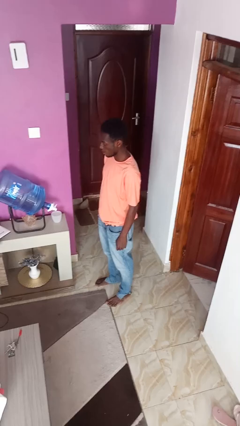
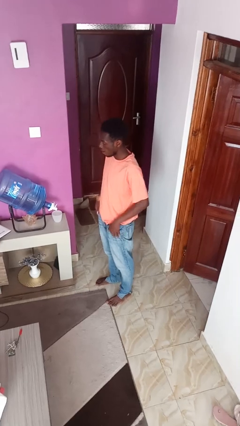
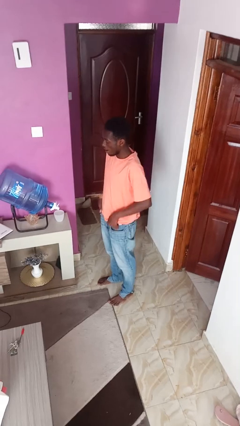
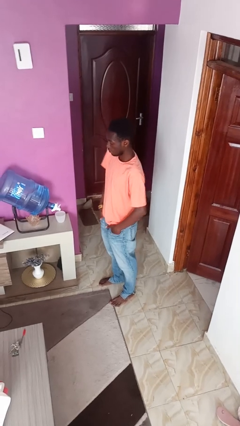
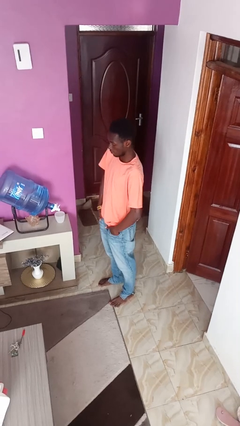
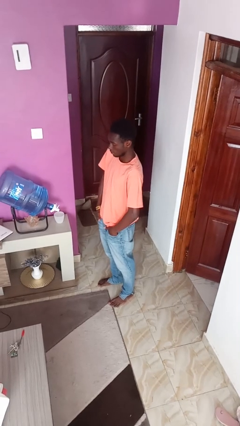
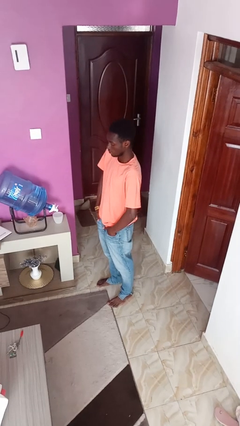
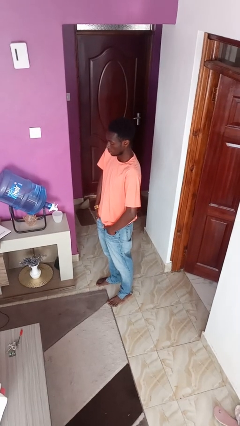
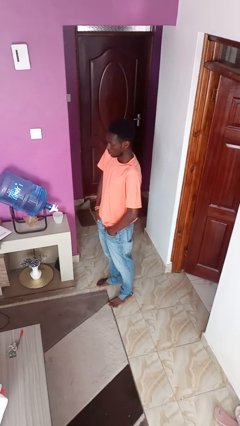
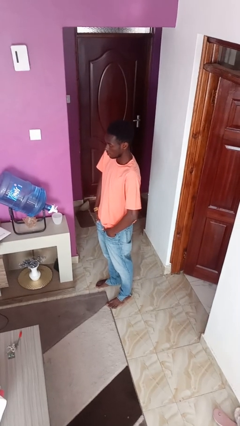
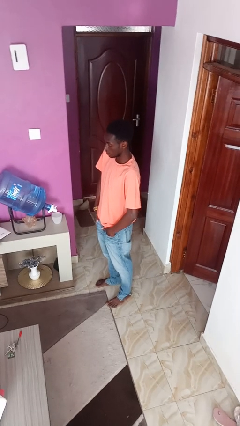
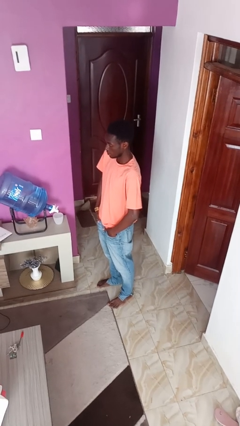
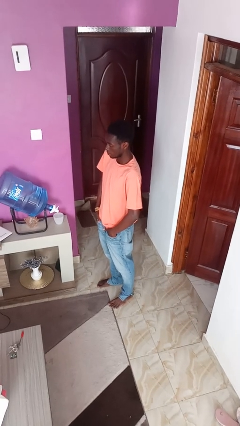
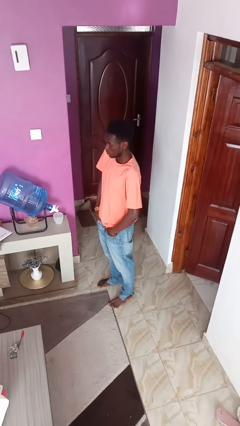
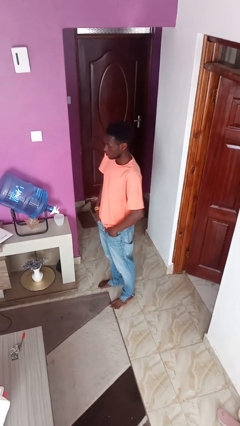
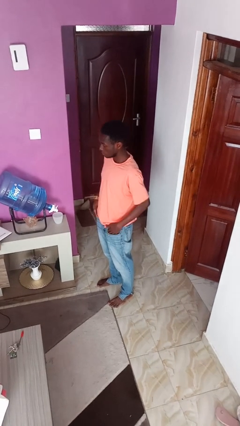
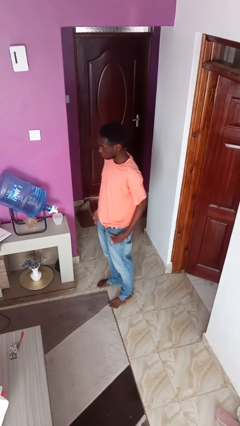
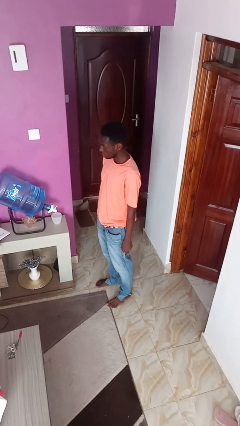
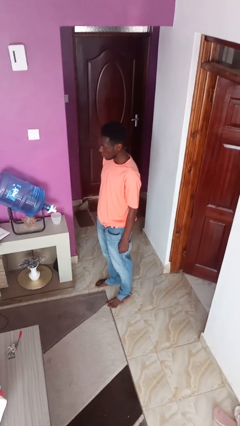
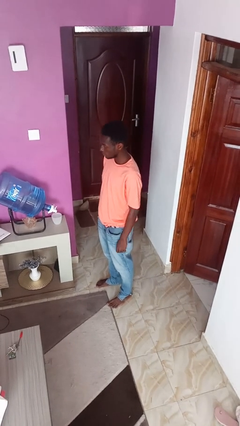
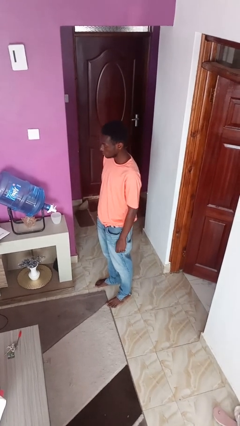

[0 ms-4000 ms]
person puts hands in back pockets

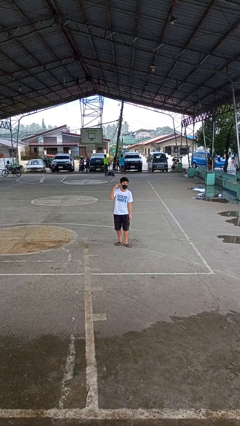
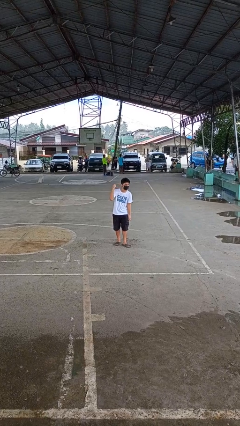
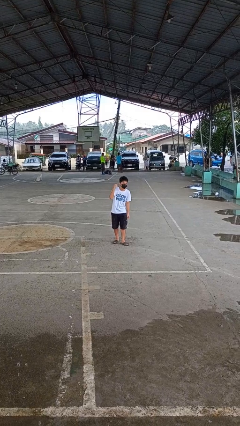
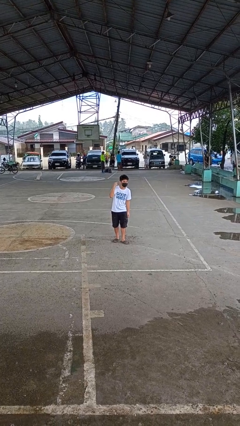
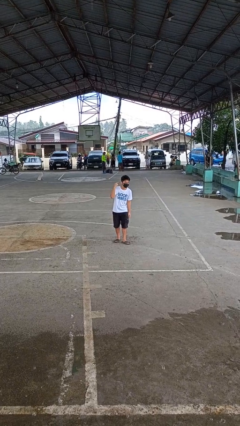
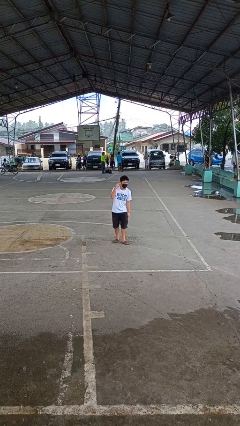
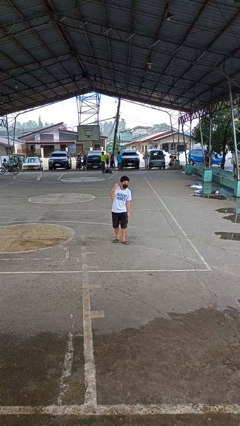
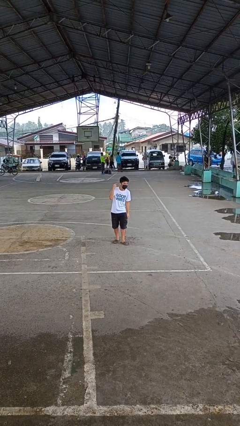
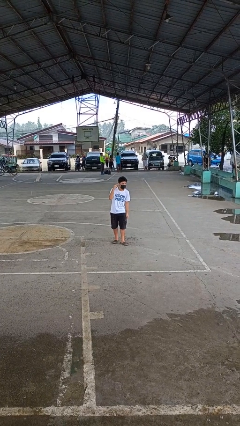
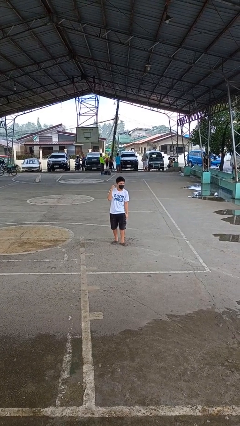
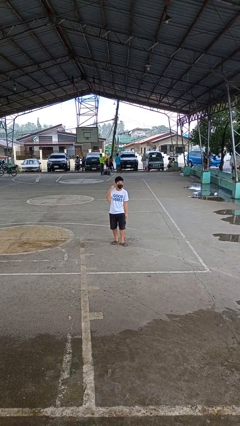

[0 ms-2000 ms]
person gestures listen closely

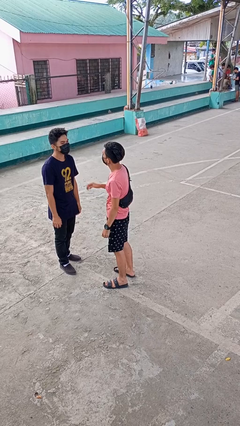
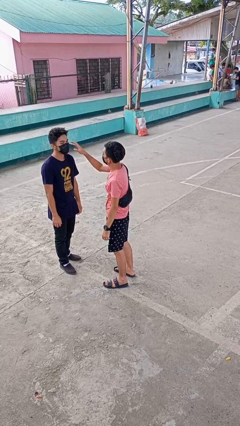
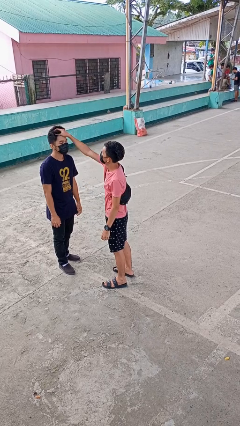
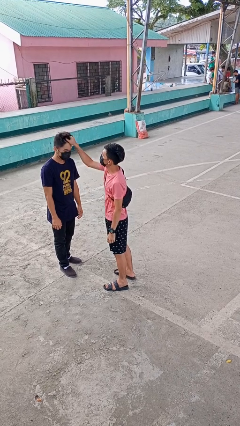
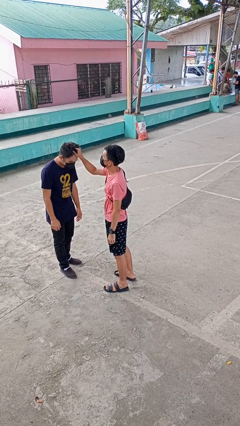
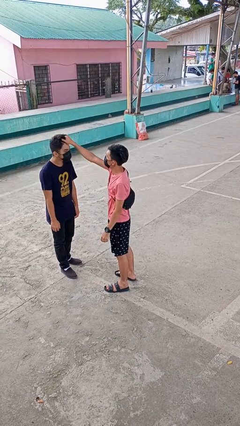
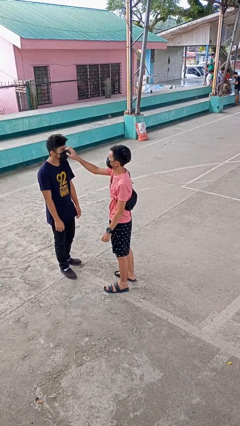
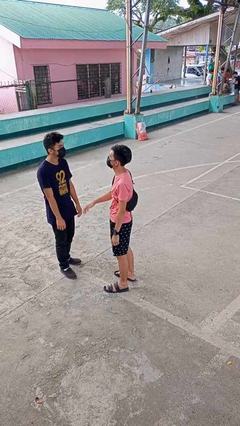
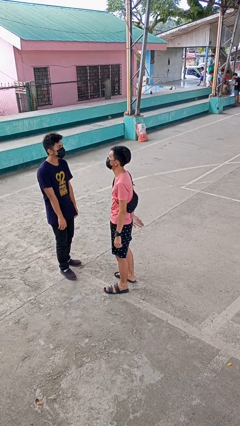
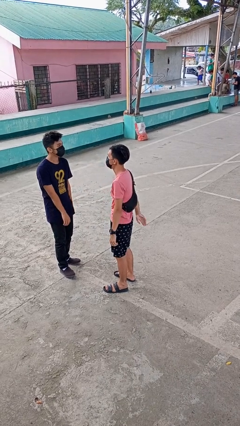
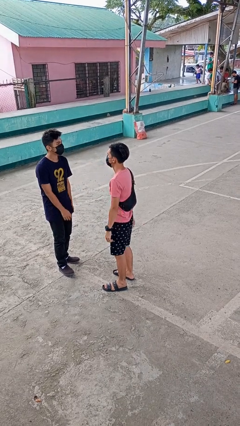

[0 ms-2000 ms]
person grabs person by hair

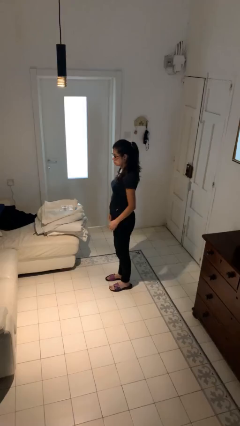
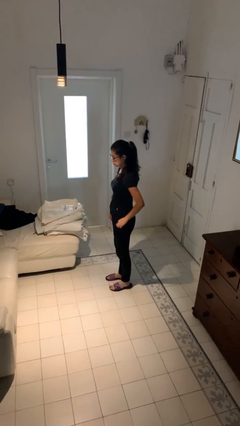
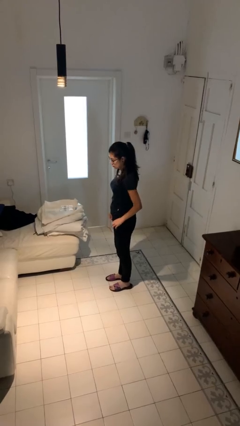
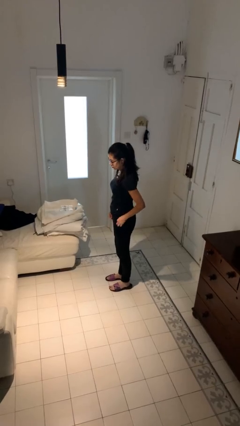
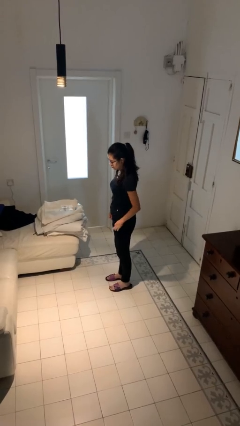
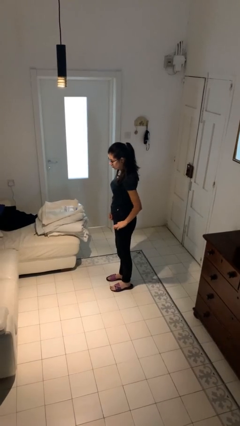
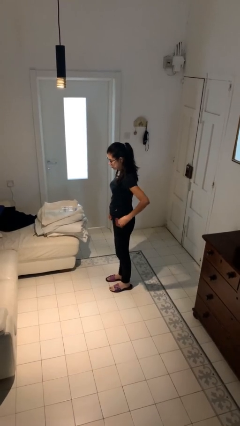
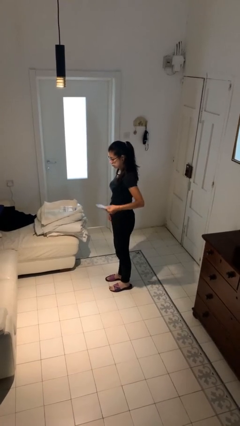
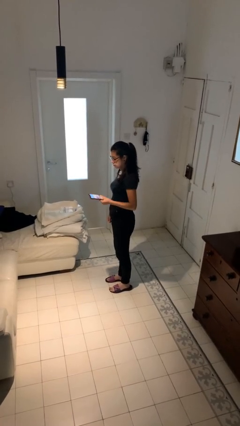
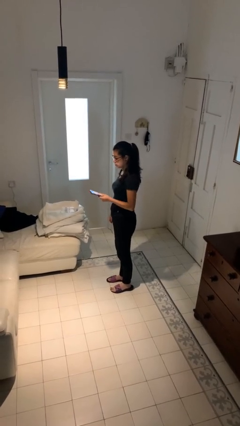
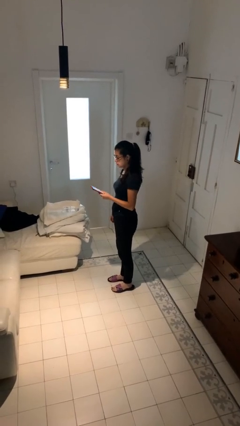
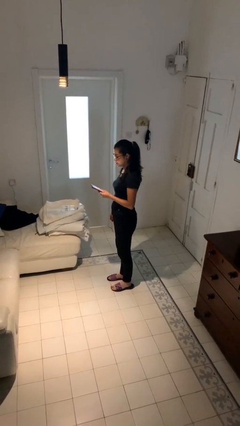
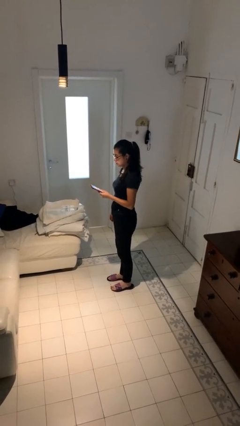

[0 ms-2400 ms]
person takes phone from pocket

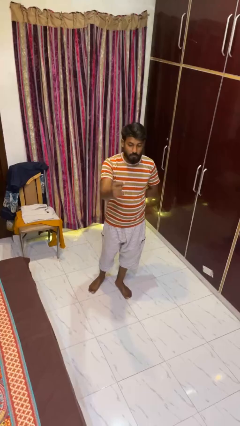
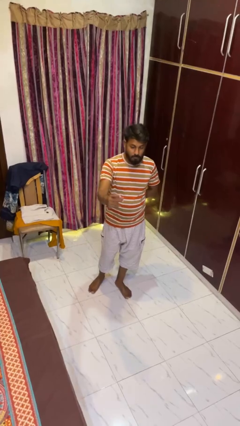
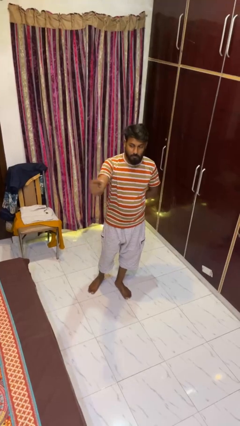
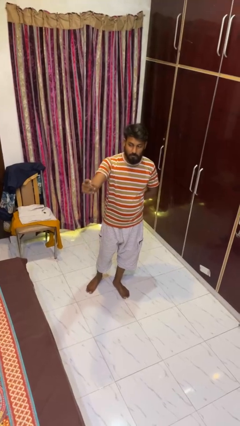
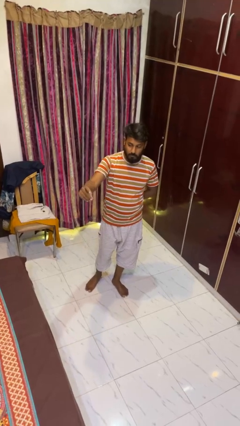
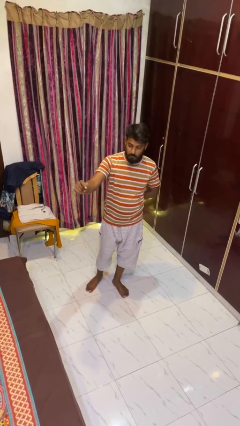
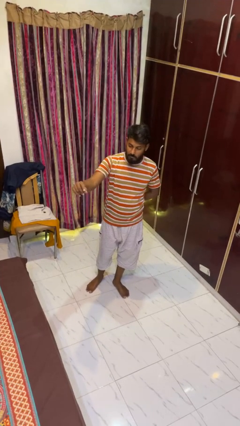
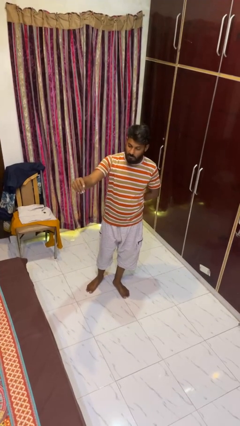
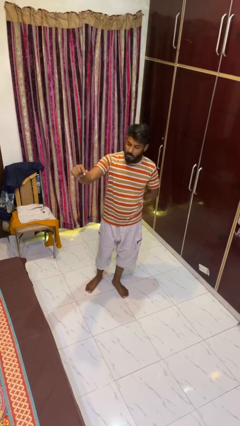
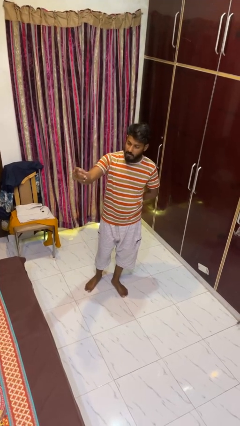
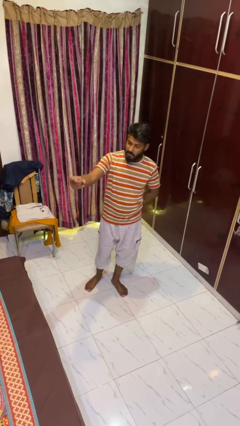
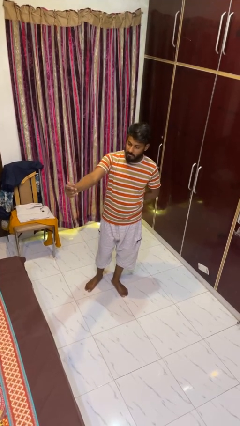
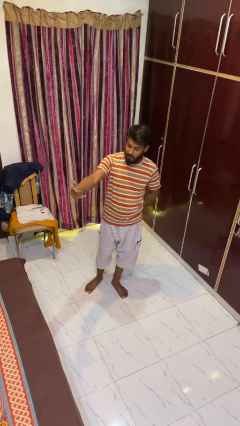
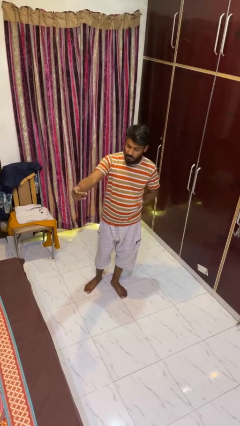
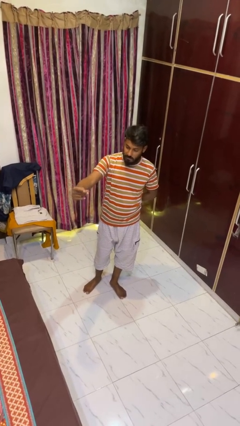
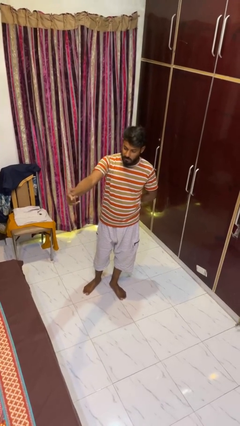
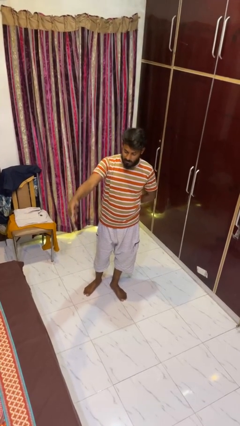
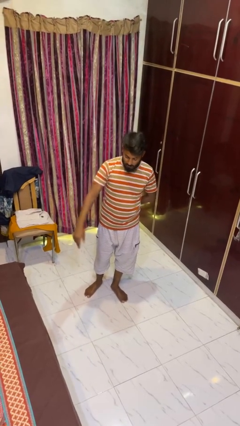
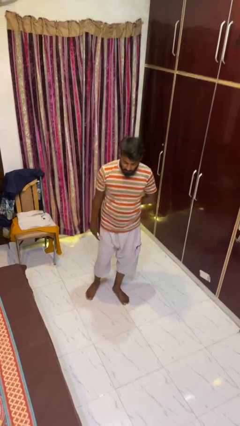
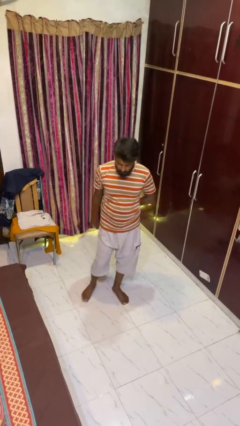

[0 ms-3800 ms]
person snaps fingers

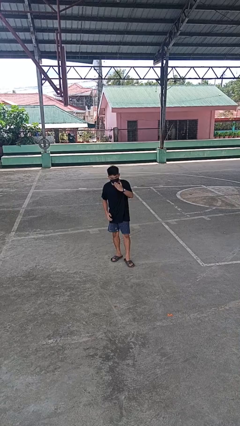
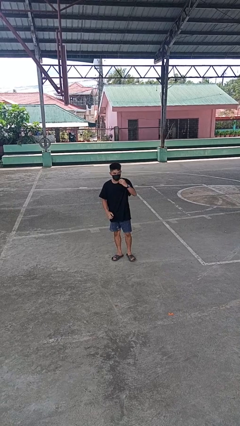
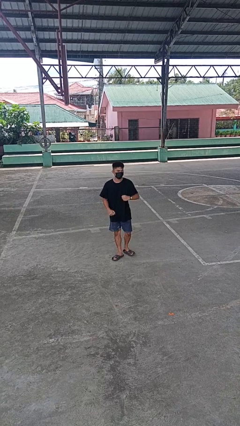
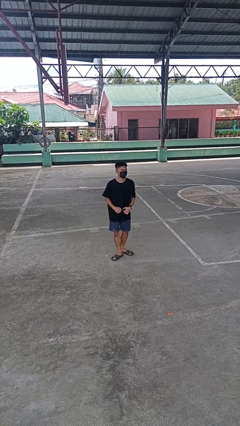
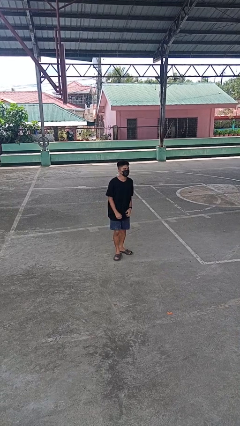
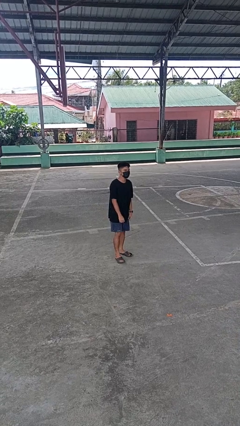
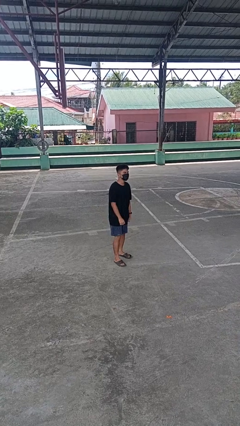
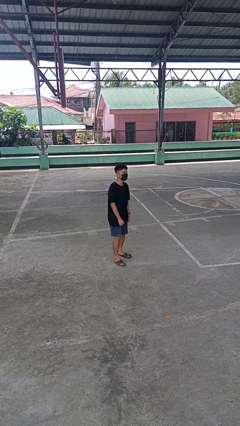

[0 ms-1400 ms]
person karate chop

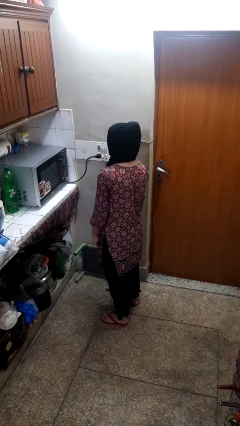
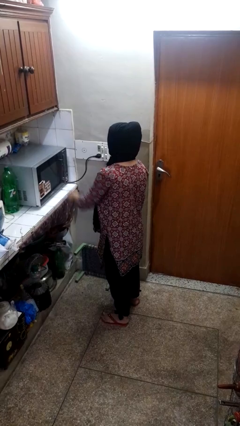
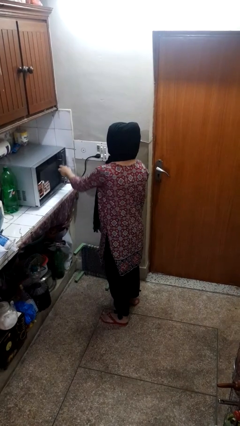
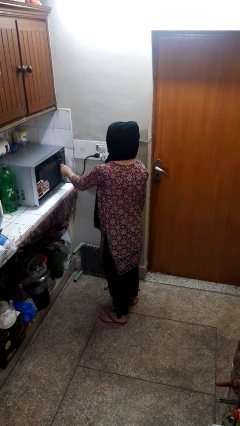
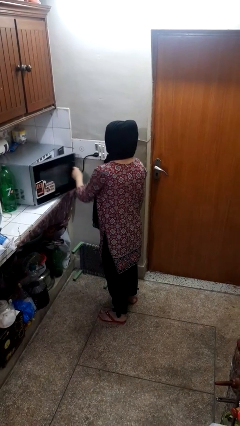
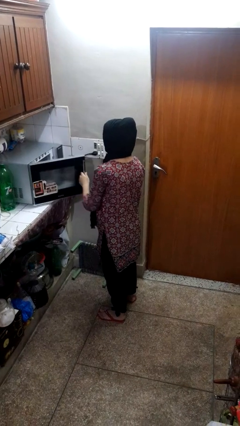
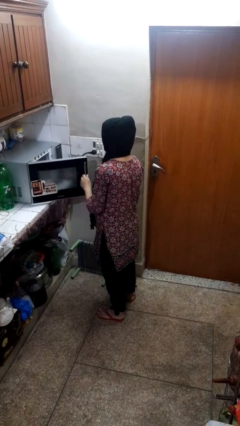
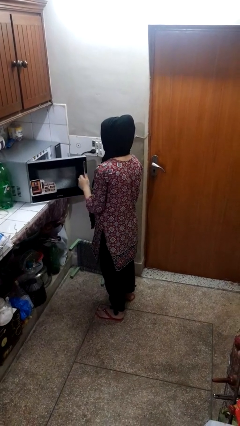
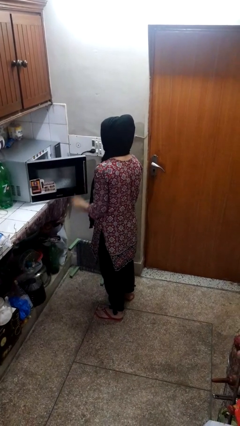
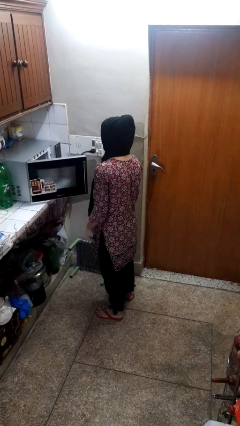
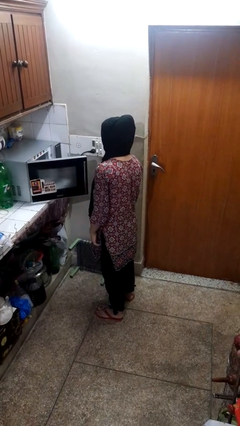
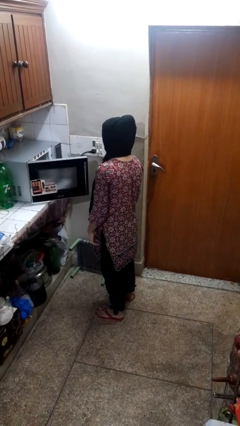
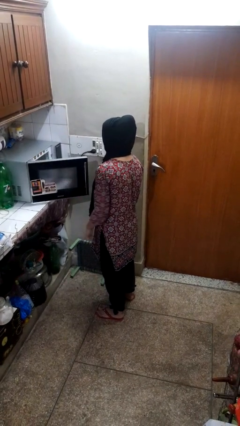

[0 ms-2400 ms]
person opens oven door
